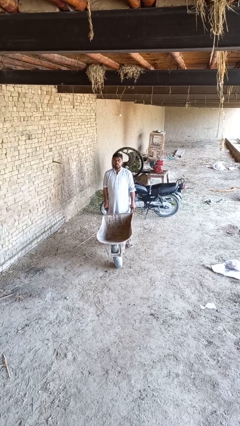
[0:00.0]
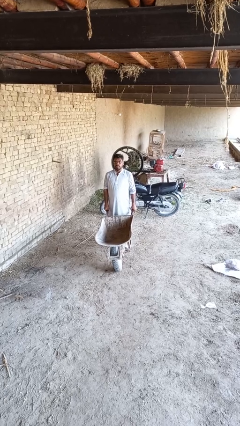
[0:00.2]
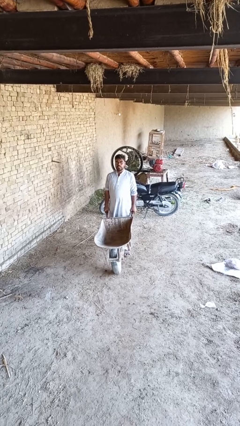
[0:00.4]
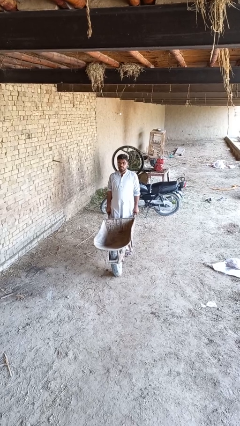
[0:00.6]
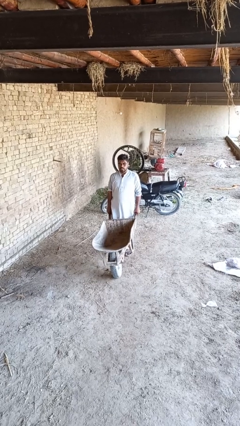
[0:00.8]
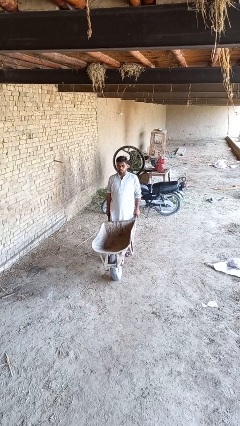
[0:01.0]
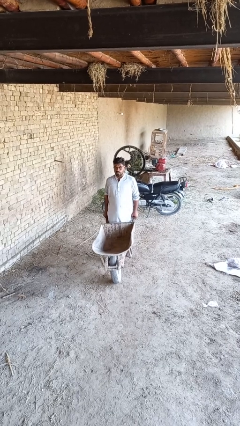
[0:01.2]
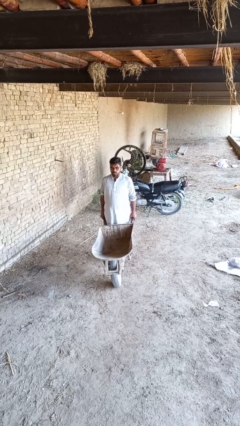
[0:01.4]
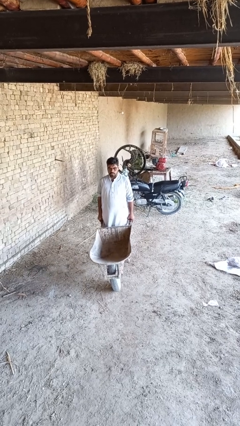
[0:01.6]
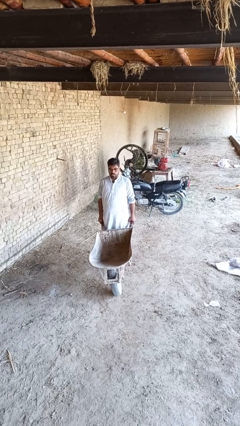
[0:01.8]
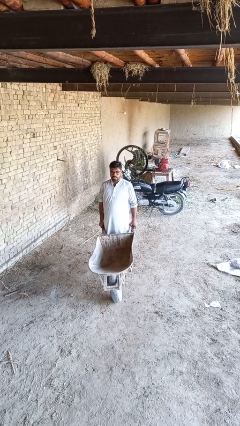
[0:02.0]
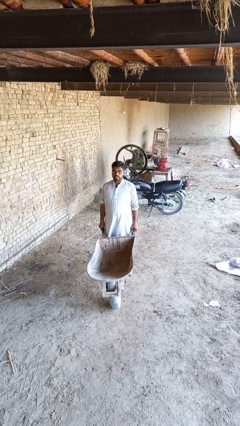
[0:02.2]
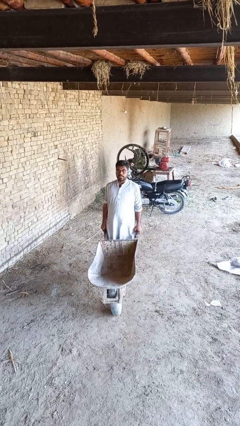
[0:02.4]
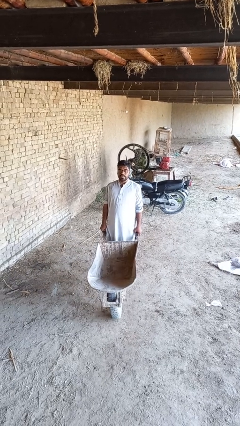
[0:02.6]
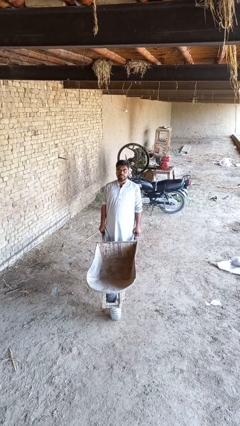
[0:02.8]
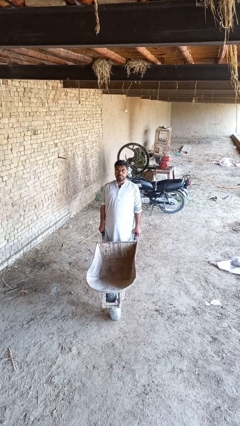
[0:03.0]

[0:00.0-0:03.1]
person pushes wheeled cart

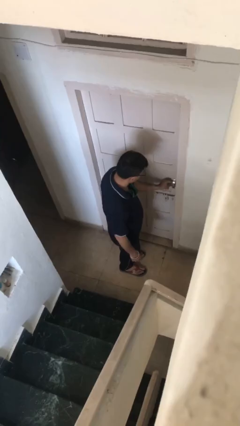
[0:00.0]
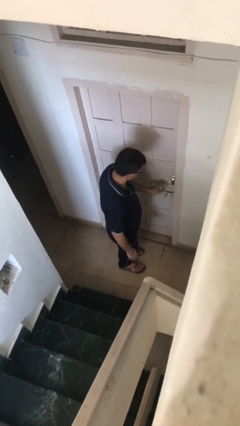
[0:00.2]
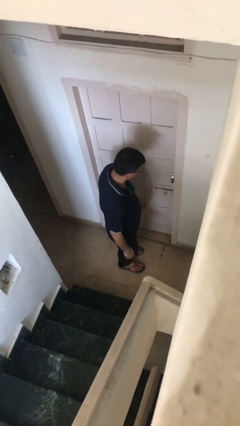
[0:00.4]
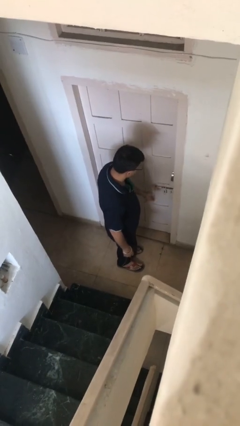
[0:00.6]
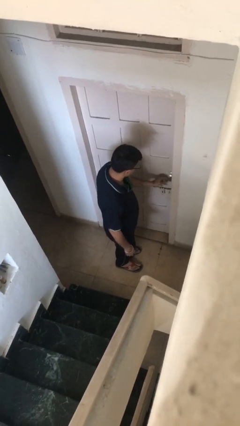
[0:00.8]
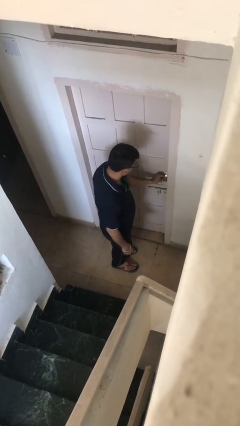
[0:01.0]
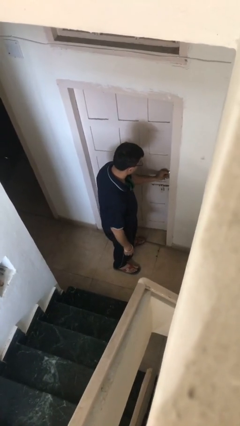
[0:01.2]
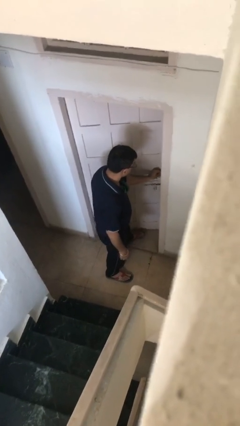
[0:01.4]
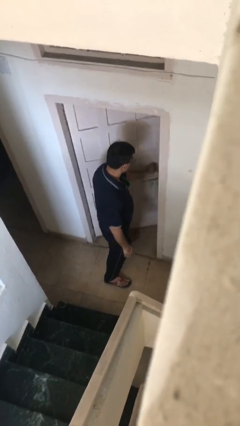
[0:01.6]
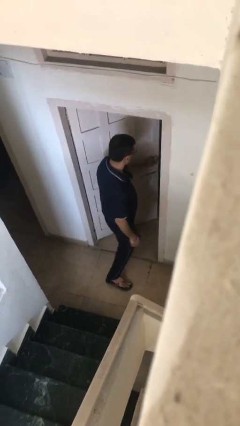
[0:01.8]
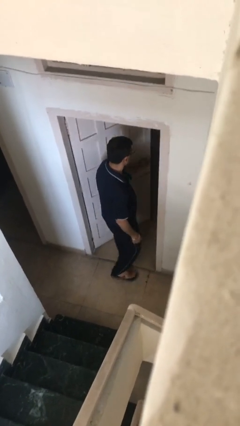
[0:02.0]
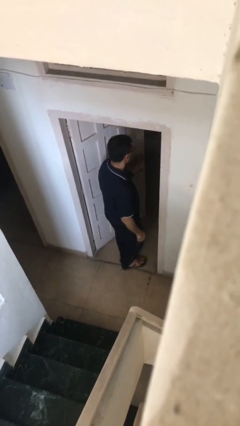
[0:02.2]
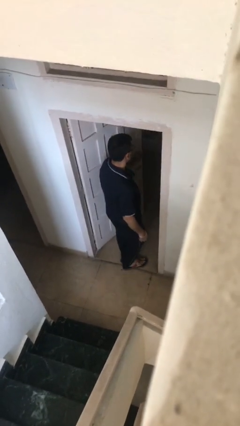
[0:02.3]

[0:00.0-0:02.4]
person opens facility door

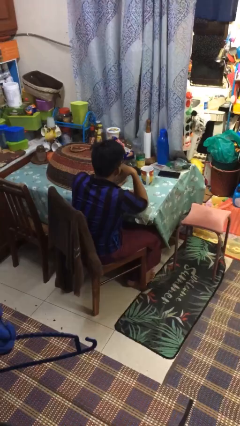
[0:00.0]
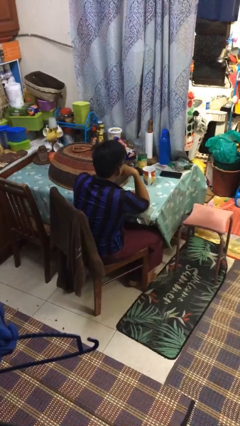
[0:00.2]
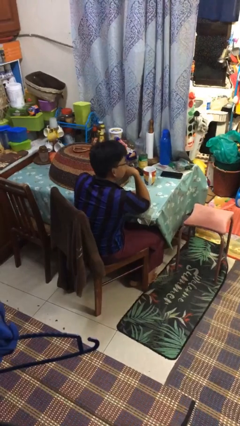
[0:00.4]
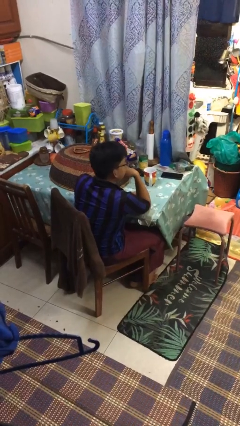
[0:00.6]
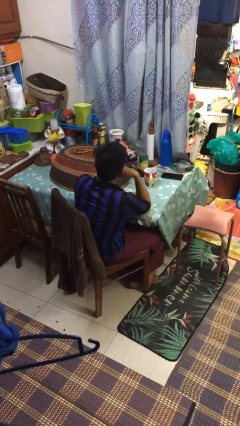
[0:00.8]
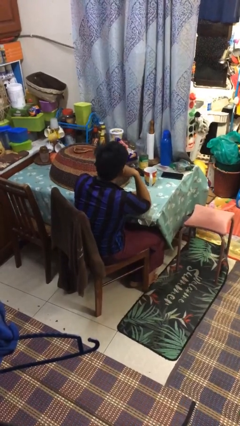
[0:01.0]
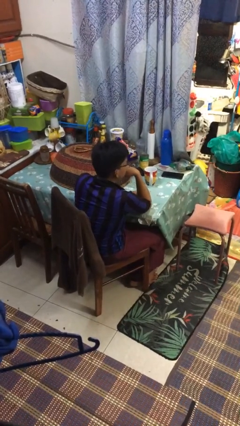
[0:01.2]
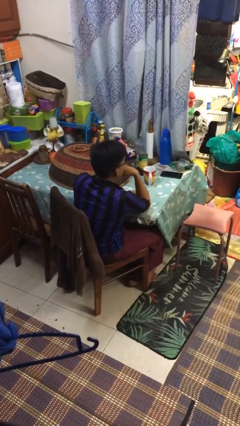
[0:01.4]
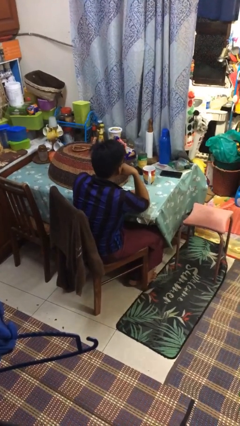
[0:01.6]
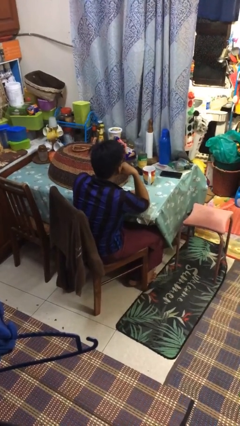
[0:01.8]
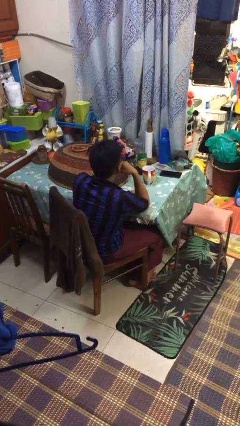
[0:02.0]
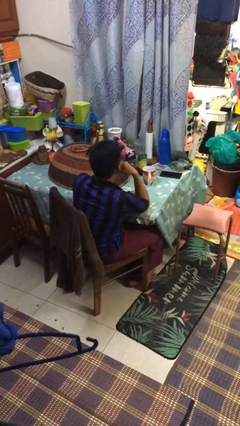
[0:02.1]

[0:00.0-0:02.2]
person shakes head

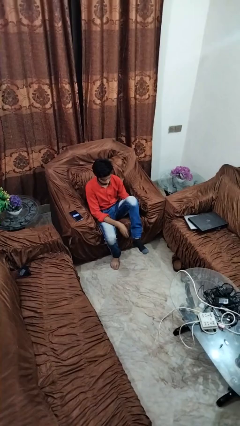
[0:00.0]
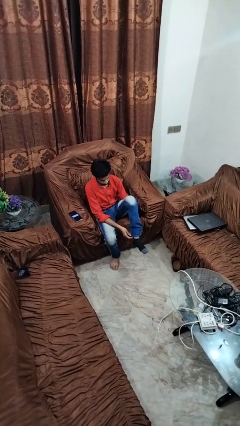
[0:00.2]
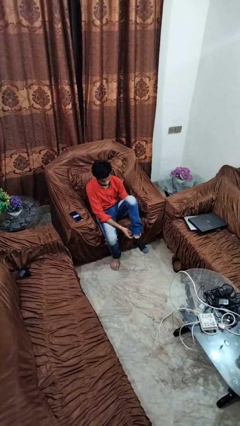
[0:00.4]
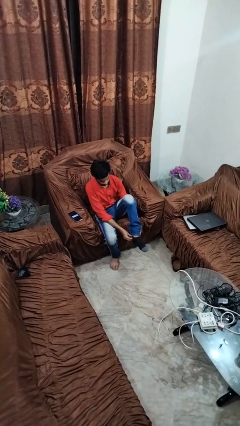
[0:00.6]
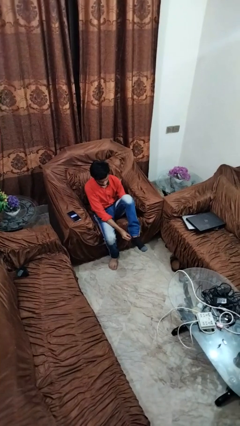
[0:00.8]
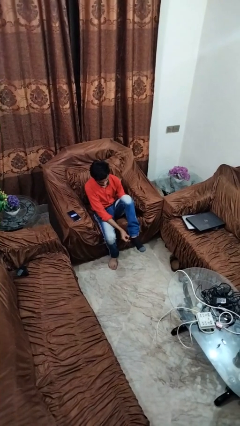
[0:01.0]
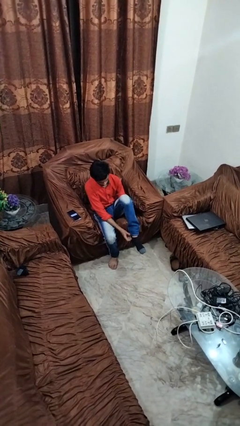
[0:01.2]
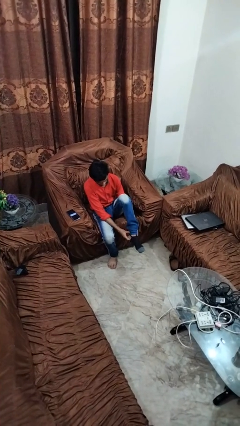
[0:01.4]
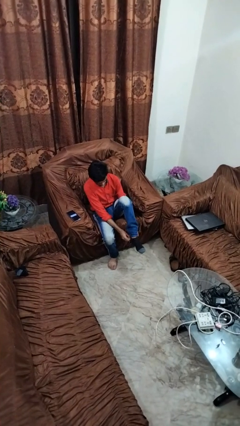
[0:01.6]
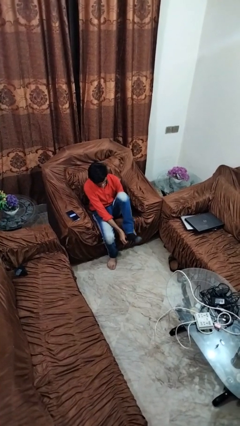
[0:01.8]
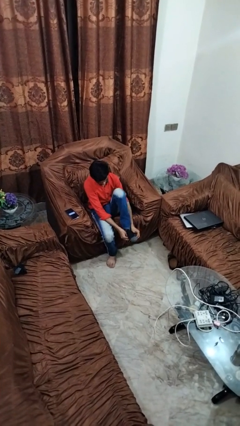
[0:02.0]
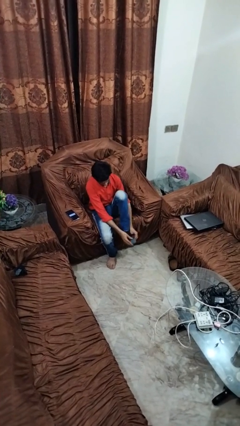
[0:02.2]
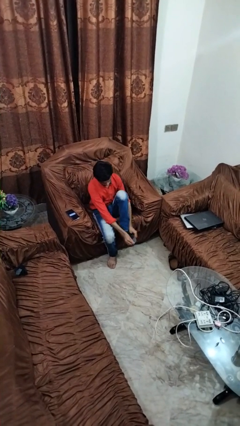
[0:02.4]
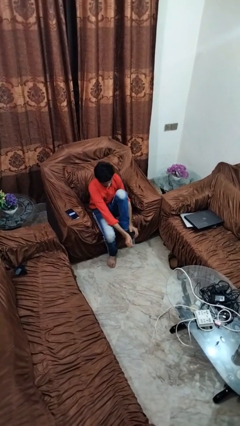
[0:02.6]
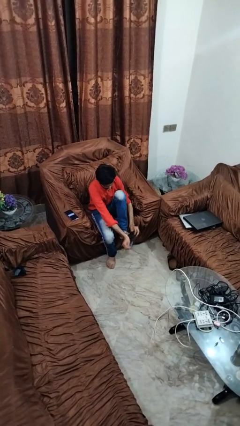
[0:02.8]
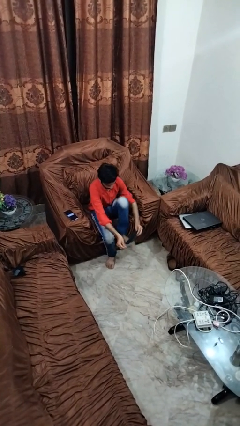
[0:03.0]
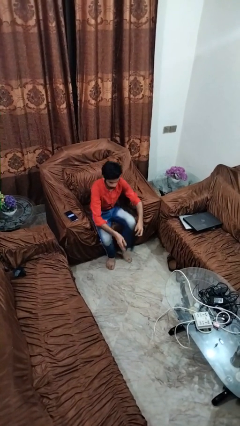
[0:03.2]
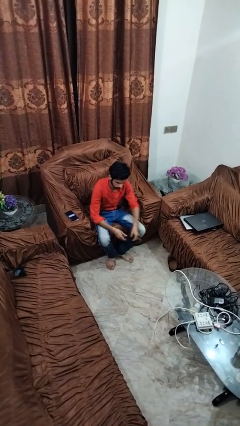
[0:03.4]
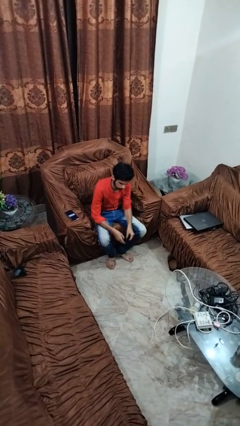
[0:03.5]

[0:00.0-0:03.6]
person takes off socks

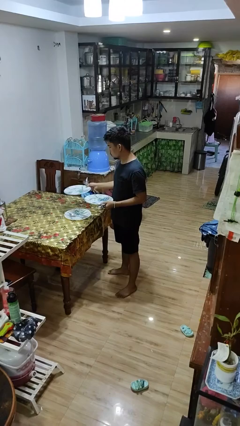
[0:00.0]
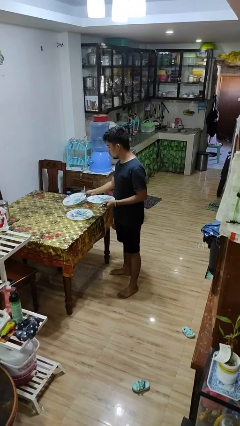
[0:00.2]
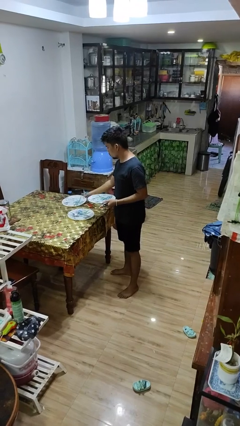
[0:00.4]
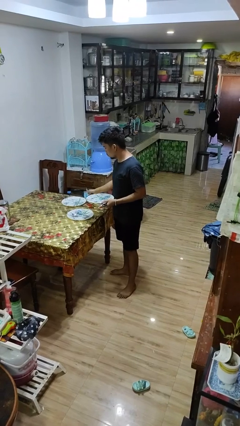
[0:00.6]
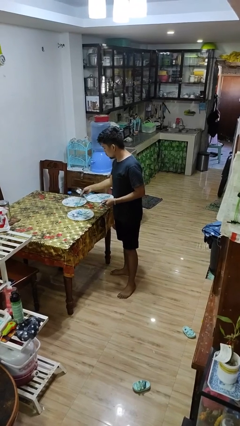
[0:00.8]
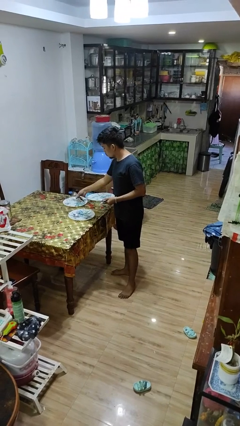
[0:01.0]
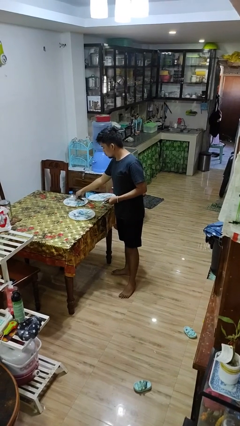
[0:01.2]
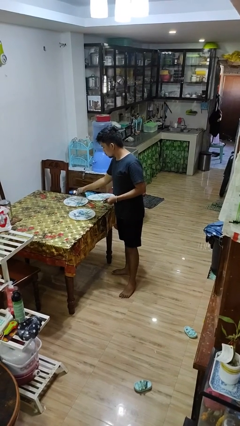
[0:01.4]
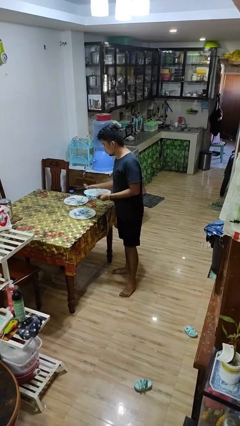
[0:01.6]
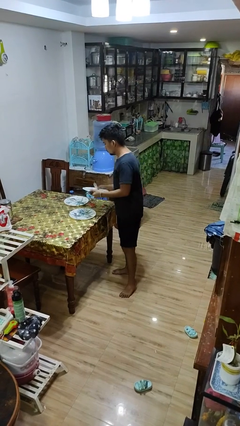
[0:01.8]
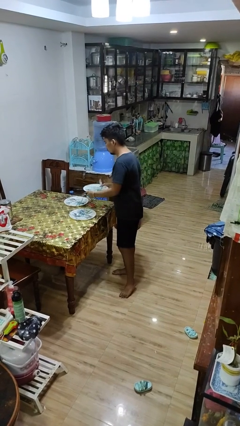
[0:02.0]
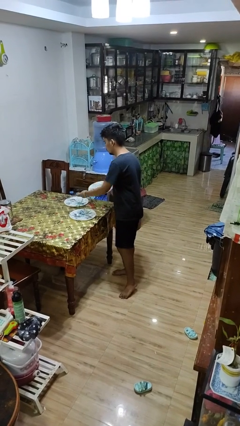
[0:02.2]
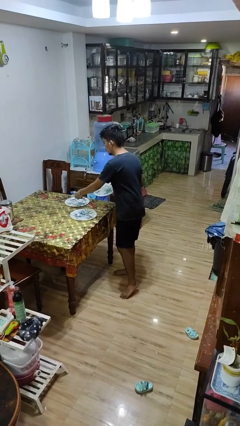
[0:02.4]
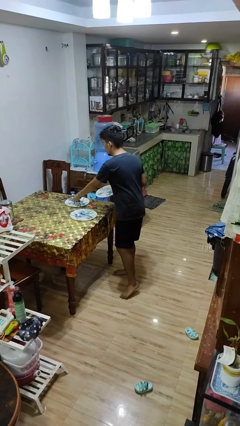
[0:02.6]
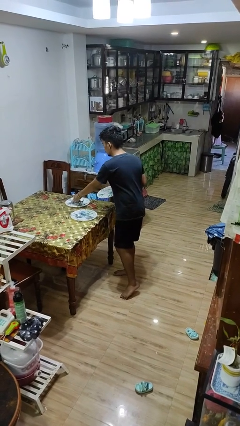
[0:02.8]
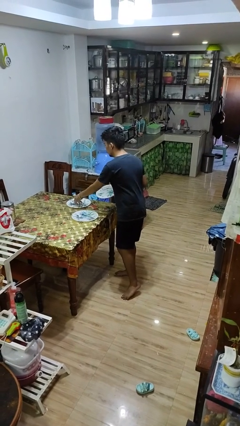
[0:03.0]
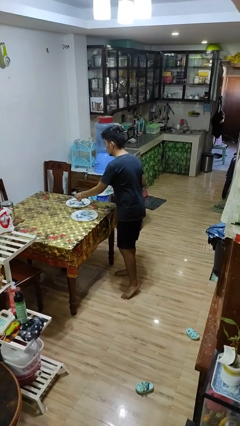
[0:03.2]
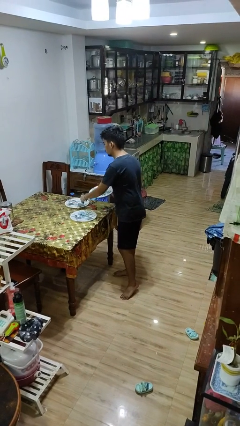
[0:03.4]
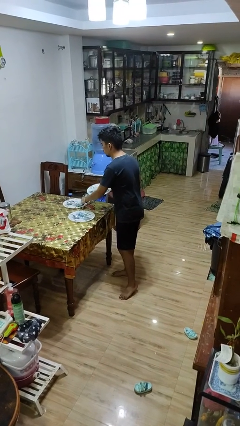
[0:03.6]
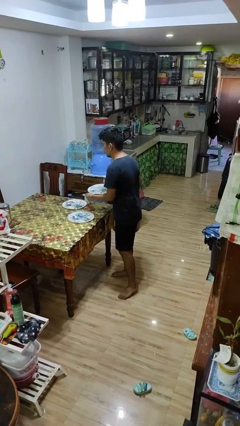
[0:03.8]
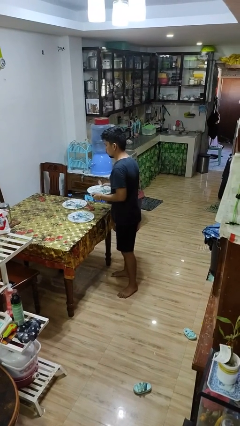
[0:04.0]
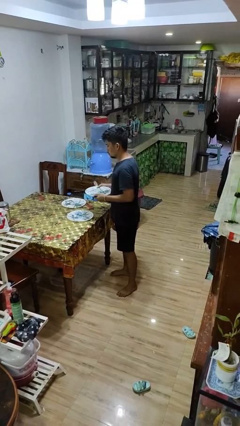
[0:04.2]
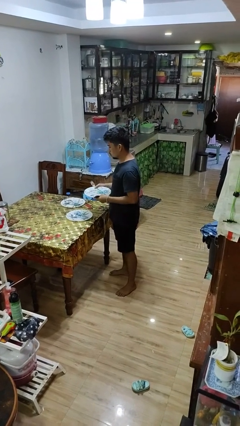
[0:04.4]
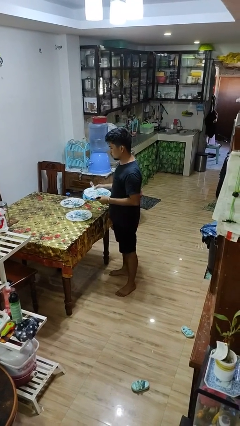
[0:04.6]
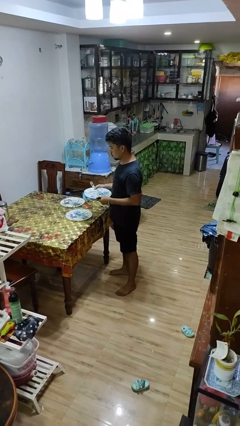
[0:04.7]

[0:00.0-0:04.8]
person sets table

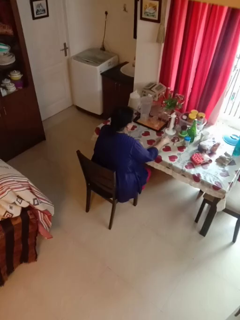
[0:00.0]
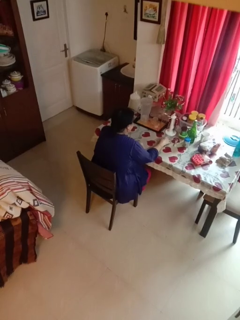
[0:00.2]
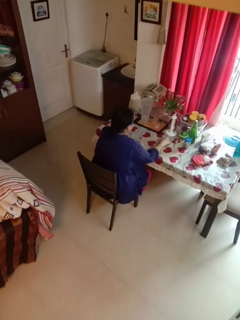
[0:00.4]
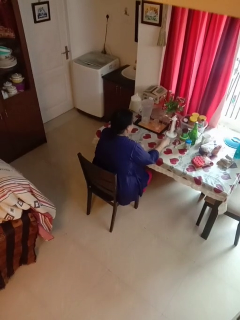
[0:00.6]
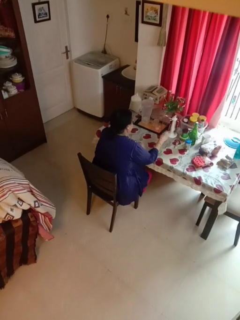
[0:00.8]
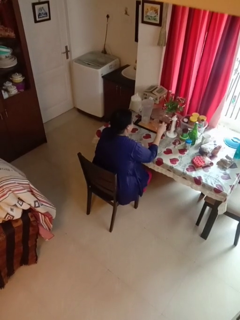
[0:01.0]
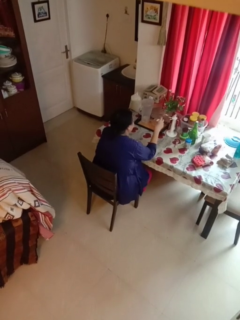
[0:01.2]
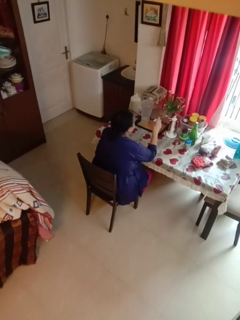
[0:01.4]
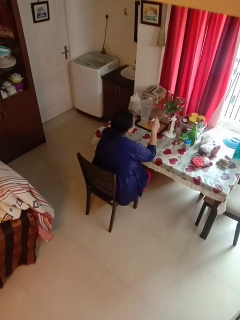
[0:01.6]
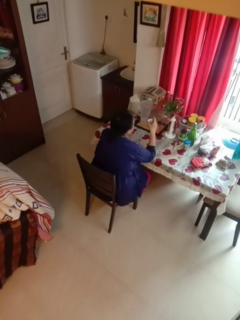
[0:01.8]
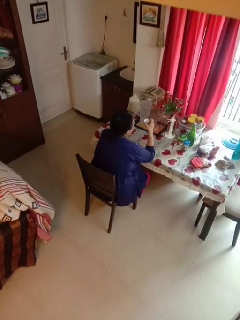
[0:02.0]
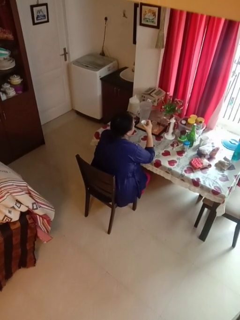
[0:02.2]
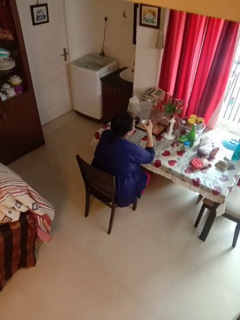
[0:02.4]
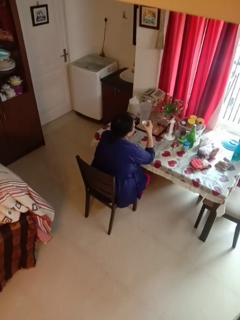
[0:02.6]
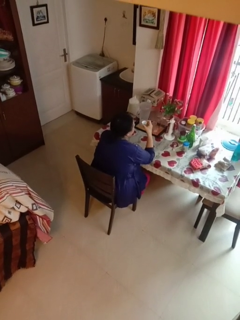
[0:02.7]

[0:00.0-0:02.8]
person picks up object from table
